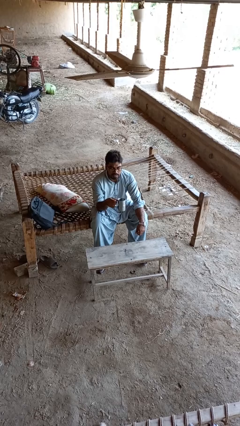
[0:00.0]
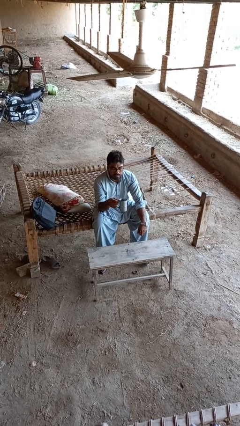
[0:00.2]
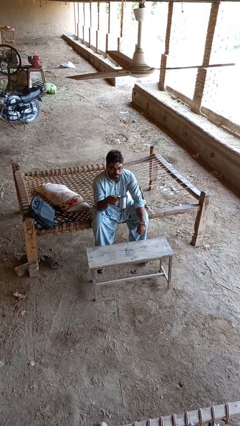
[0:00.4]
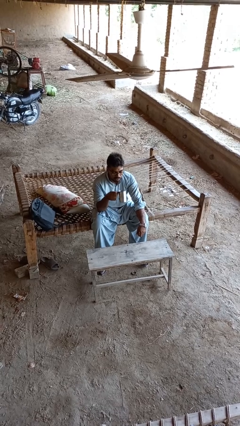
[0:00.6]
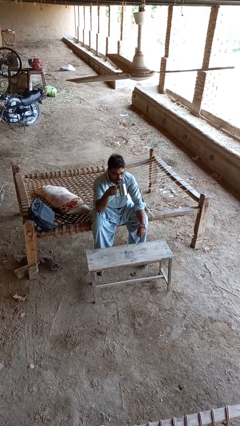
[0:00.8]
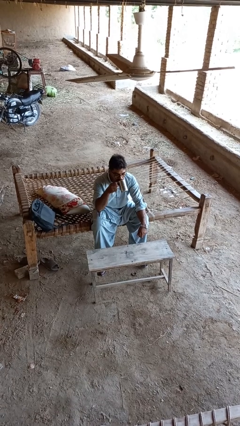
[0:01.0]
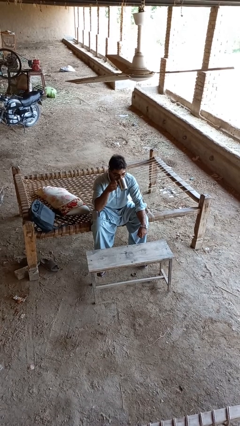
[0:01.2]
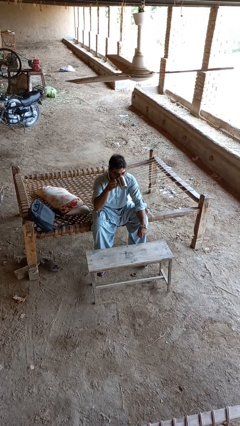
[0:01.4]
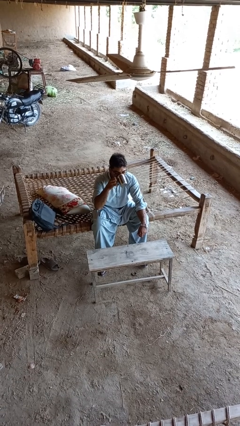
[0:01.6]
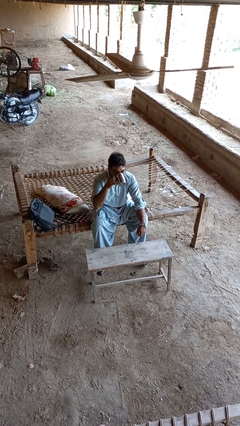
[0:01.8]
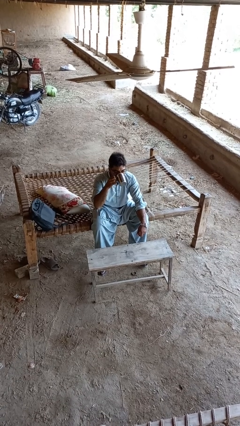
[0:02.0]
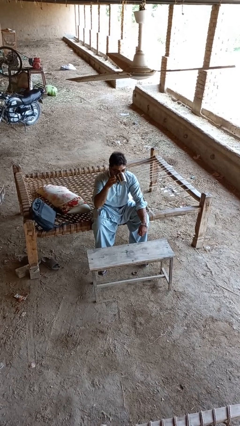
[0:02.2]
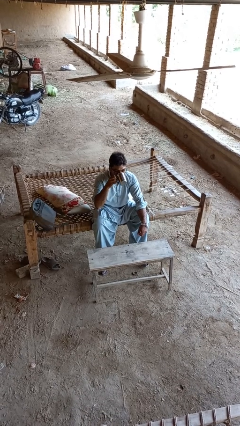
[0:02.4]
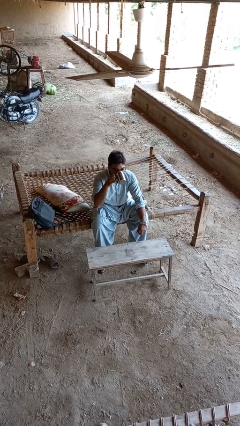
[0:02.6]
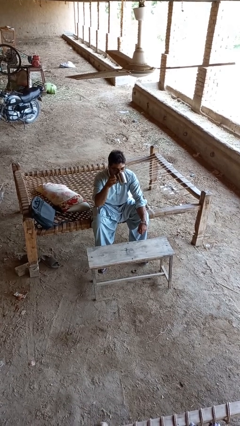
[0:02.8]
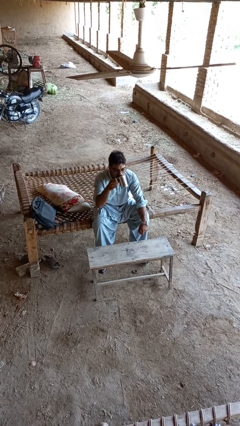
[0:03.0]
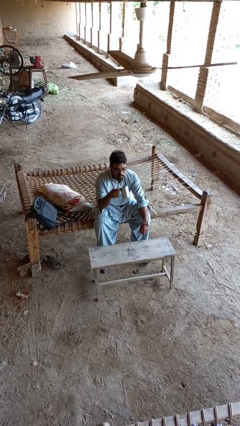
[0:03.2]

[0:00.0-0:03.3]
person drinks from mug

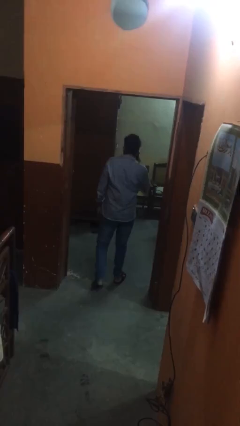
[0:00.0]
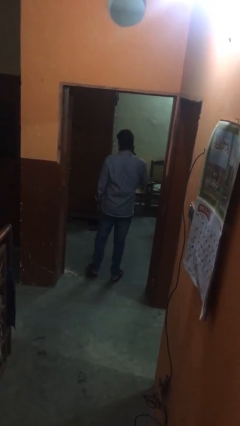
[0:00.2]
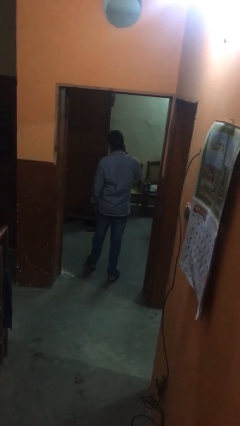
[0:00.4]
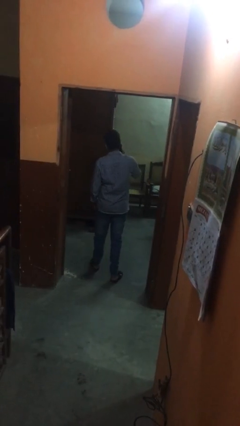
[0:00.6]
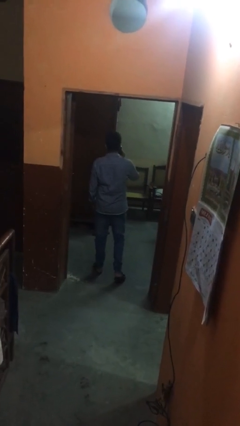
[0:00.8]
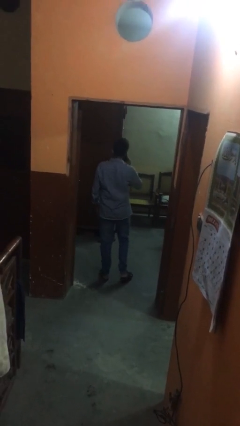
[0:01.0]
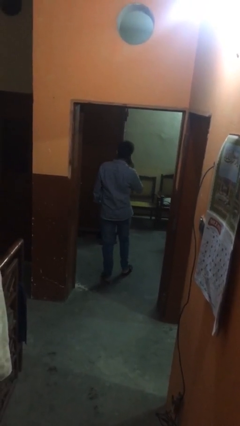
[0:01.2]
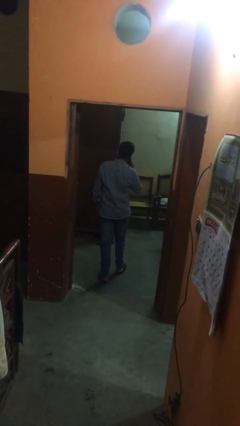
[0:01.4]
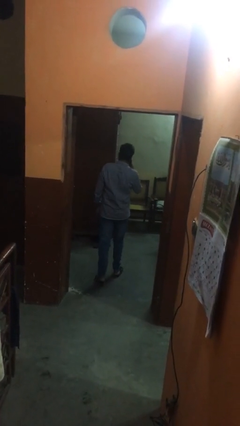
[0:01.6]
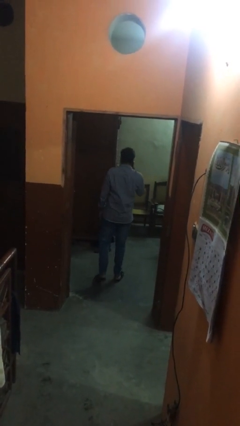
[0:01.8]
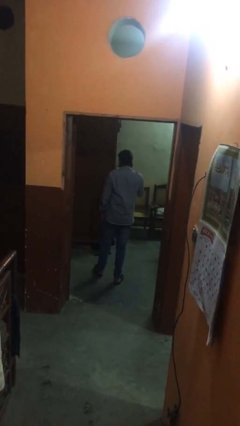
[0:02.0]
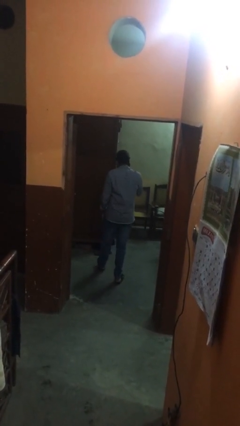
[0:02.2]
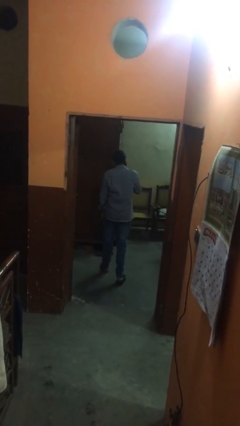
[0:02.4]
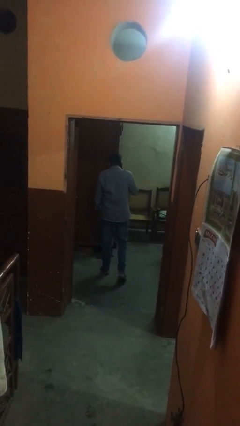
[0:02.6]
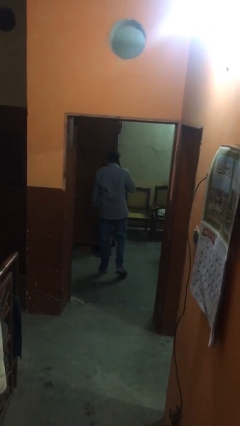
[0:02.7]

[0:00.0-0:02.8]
person exits scene through structure

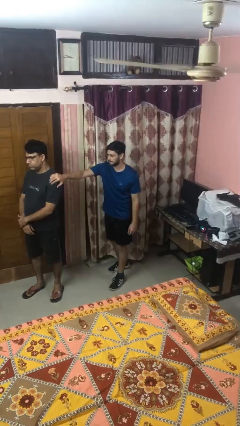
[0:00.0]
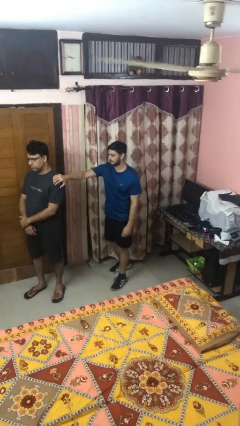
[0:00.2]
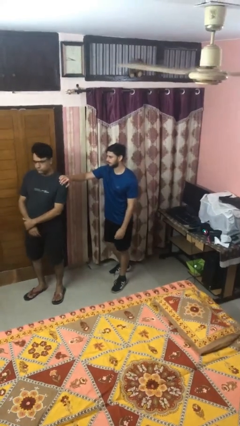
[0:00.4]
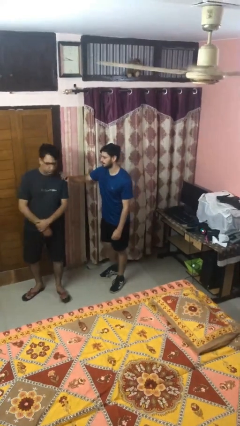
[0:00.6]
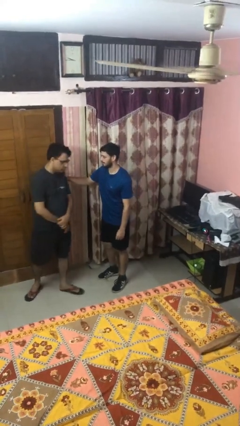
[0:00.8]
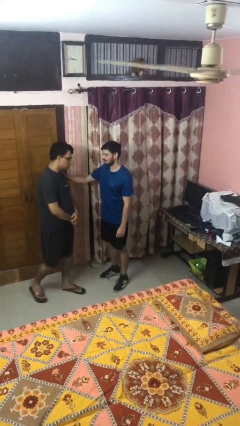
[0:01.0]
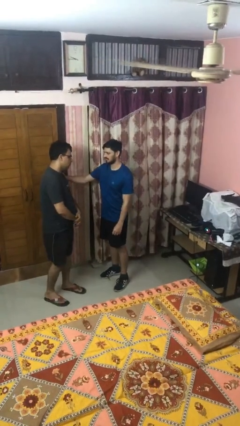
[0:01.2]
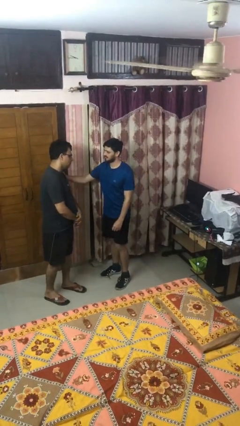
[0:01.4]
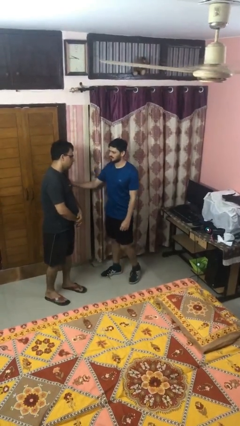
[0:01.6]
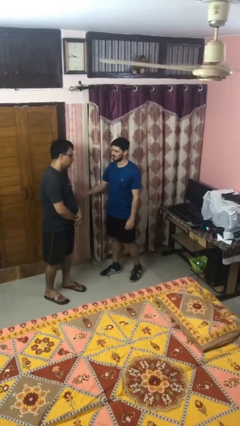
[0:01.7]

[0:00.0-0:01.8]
person spins person around

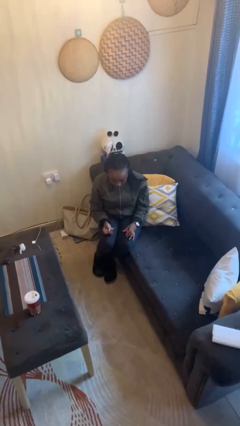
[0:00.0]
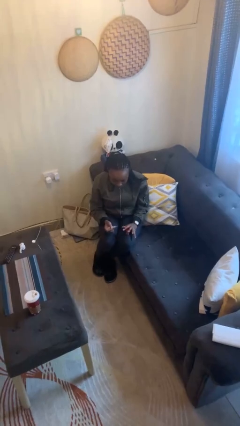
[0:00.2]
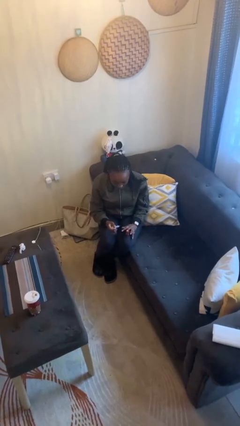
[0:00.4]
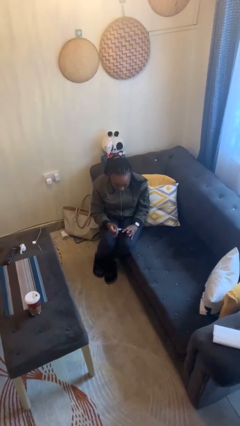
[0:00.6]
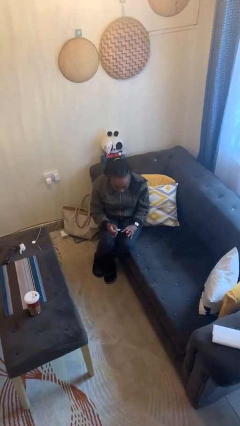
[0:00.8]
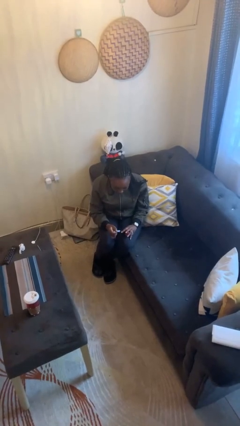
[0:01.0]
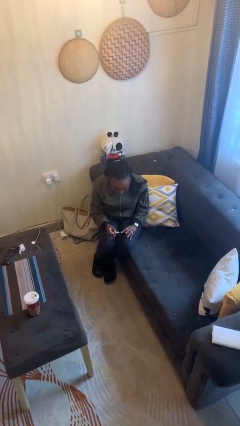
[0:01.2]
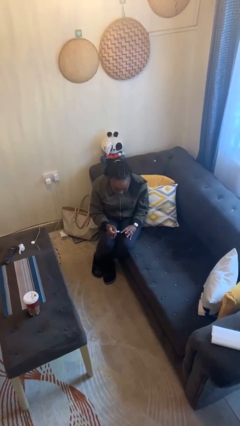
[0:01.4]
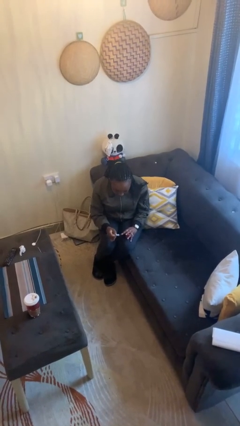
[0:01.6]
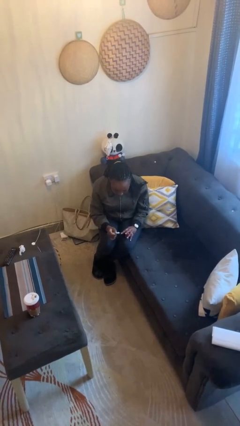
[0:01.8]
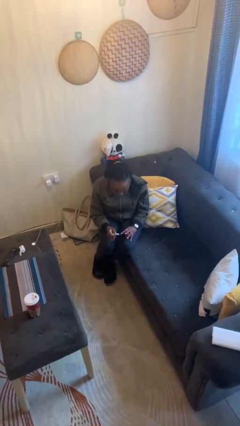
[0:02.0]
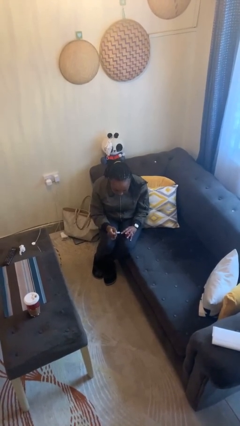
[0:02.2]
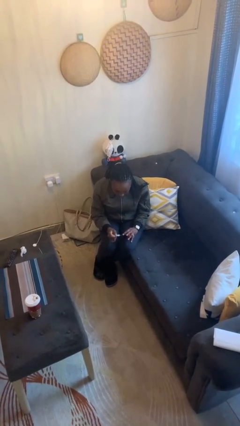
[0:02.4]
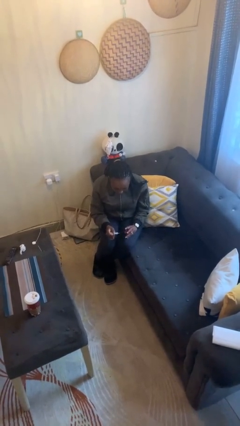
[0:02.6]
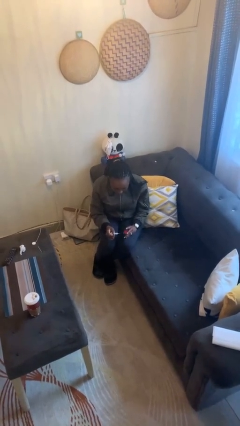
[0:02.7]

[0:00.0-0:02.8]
person paints fingernails

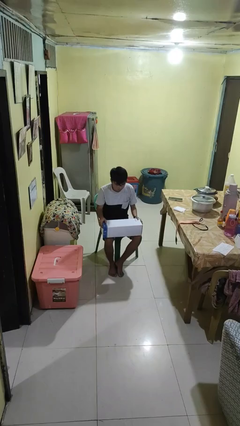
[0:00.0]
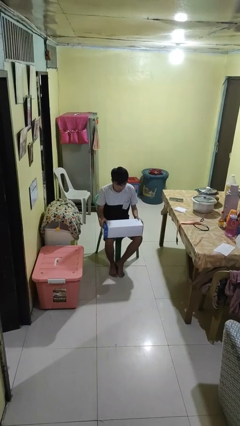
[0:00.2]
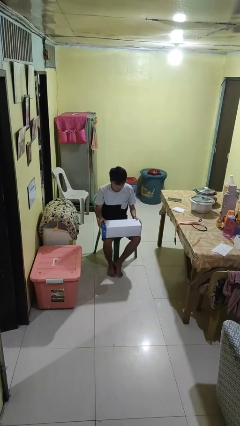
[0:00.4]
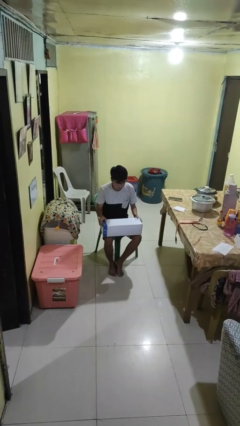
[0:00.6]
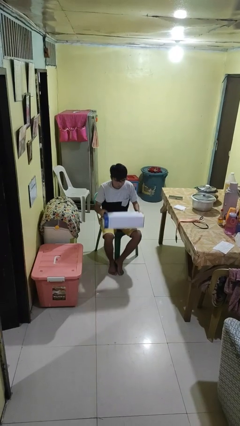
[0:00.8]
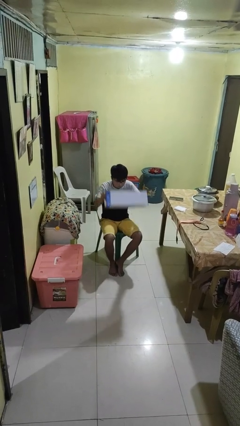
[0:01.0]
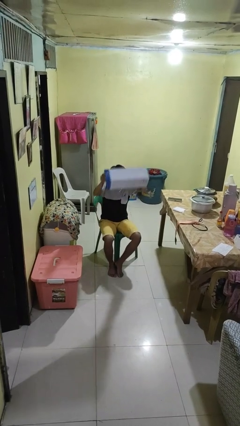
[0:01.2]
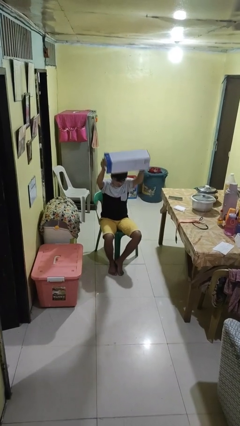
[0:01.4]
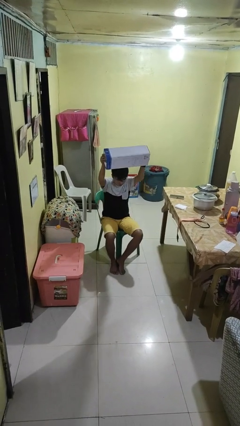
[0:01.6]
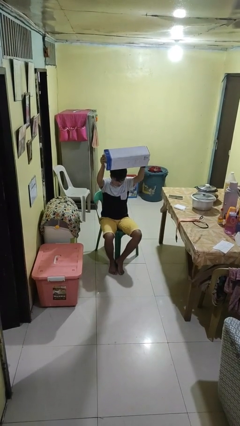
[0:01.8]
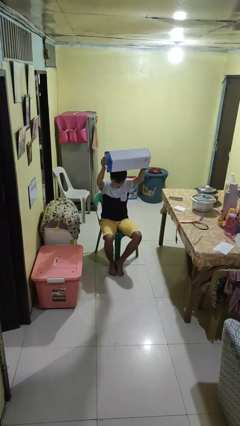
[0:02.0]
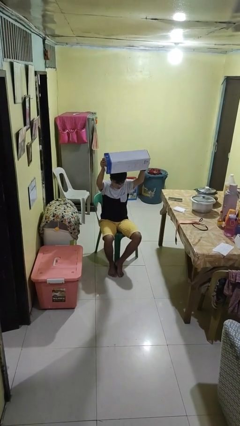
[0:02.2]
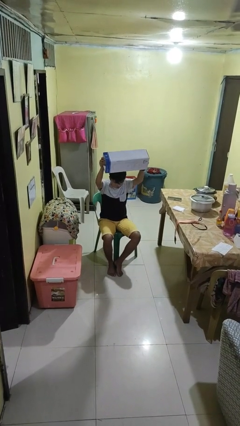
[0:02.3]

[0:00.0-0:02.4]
person holds object above head

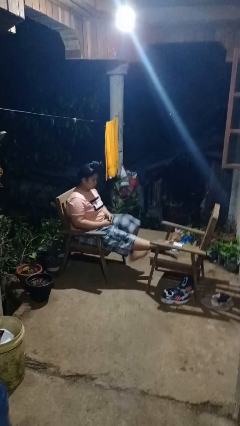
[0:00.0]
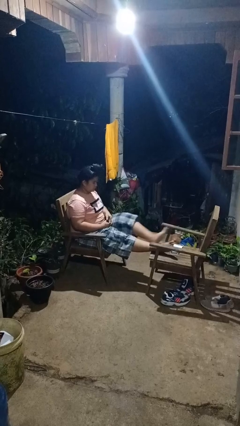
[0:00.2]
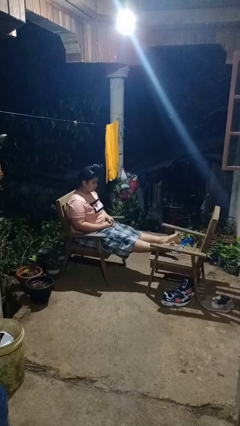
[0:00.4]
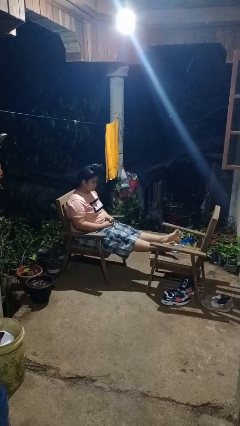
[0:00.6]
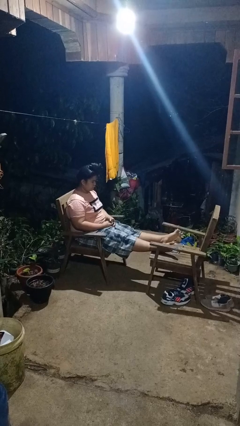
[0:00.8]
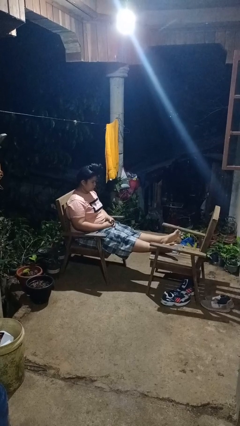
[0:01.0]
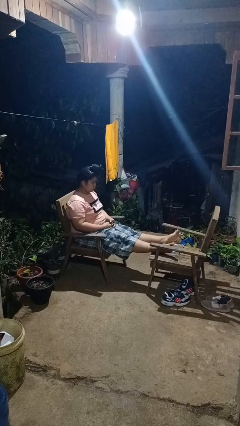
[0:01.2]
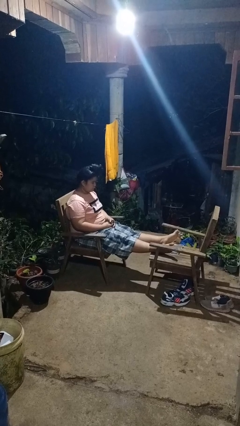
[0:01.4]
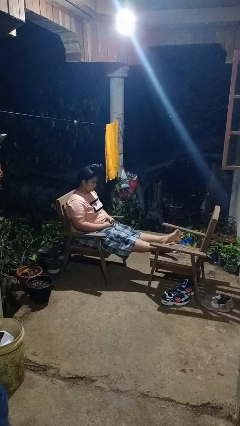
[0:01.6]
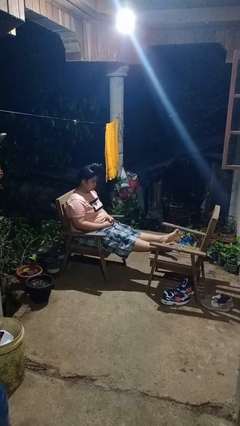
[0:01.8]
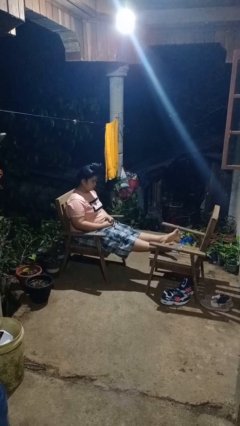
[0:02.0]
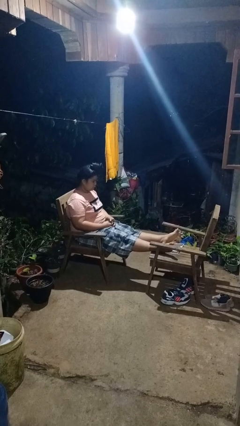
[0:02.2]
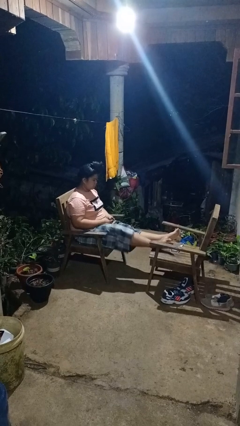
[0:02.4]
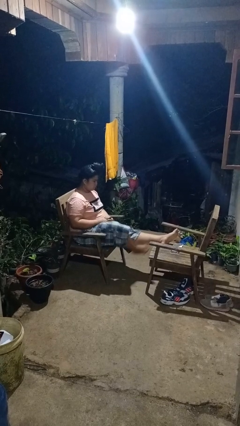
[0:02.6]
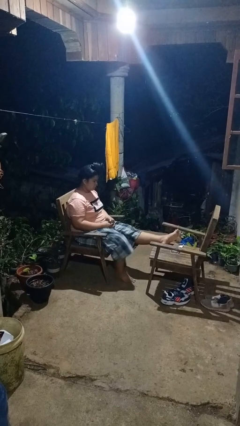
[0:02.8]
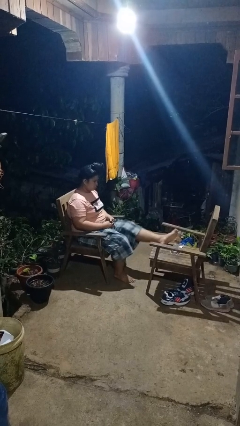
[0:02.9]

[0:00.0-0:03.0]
person puts feet up

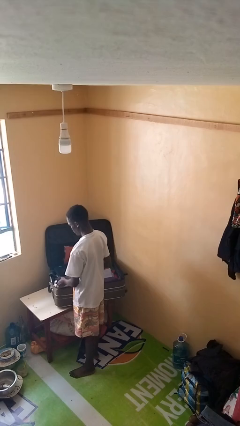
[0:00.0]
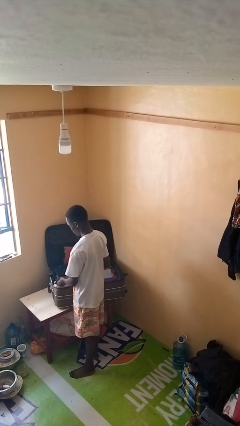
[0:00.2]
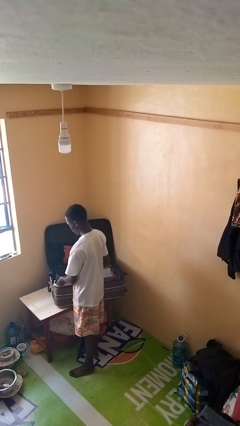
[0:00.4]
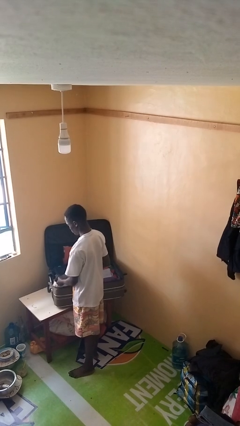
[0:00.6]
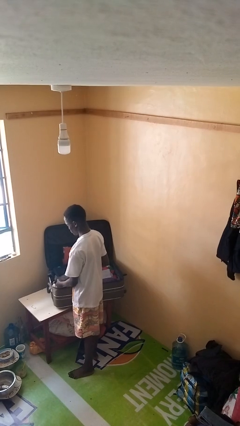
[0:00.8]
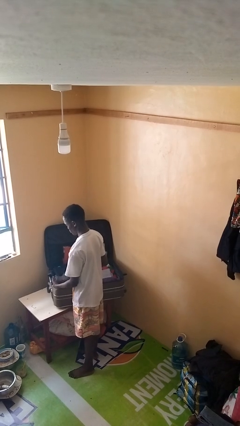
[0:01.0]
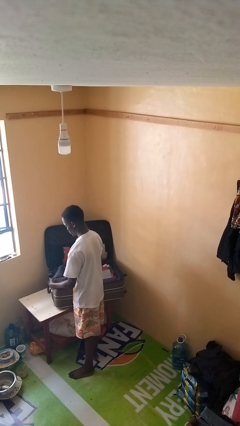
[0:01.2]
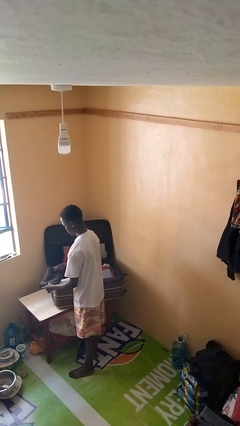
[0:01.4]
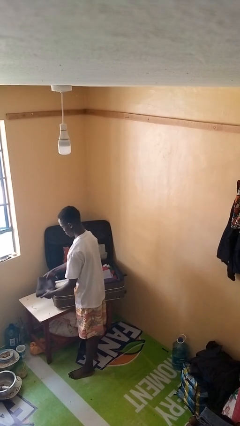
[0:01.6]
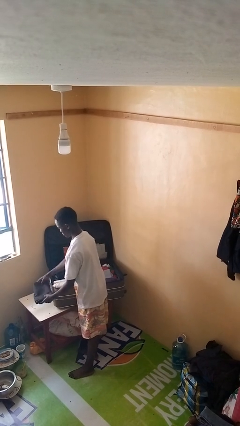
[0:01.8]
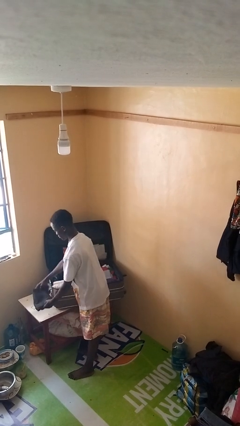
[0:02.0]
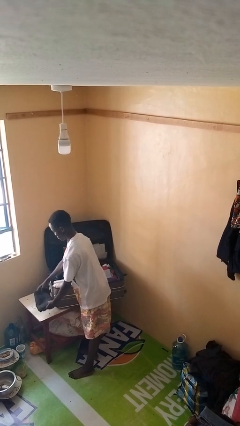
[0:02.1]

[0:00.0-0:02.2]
person unloads clothes from suitcase
